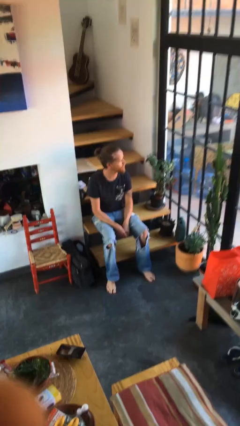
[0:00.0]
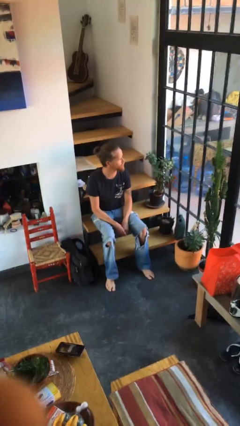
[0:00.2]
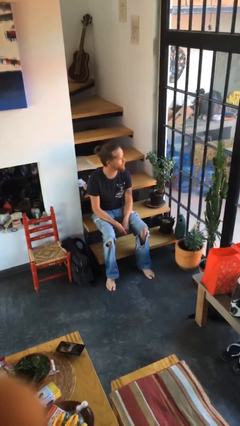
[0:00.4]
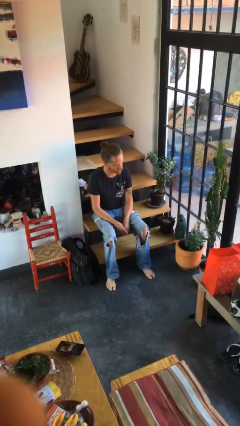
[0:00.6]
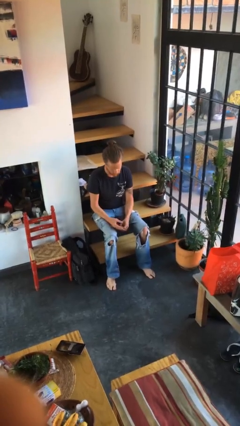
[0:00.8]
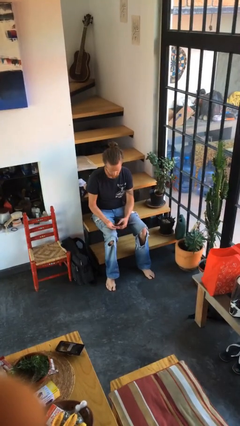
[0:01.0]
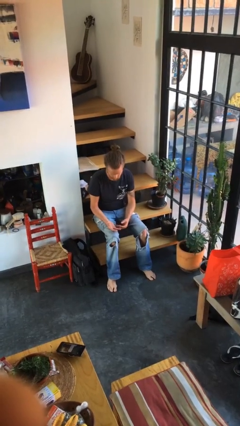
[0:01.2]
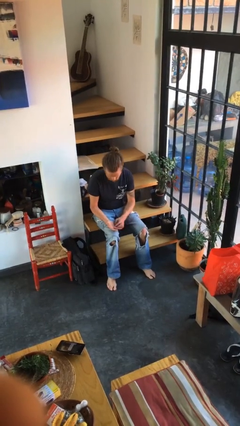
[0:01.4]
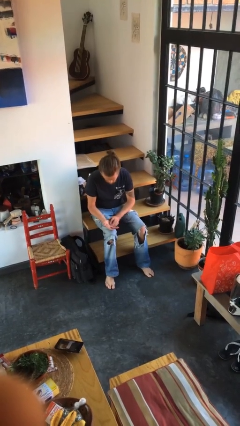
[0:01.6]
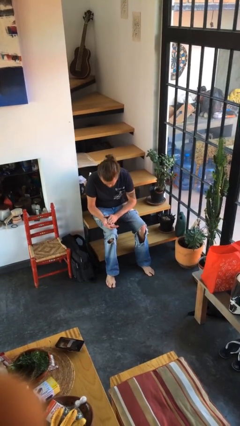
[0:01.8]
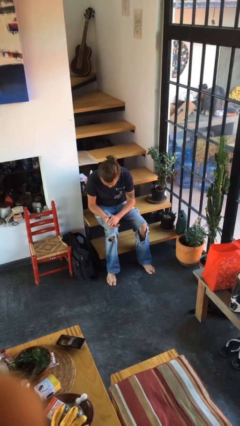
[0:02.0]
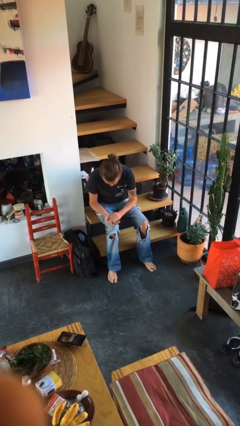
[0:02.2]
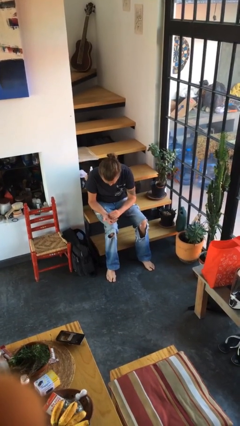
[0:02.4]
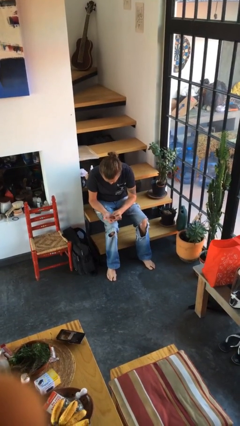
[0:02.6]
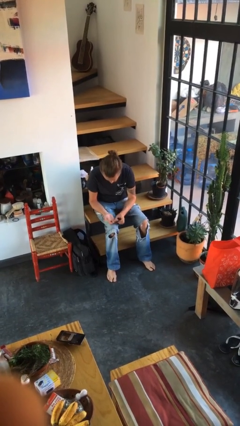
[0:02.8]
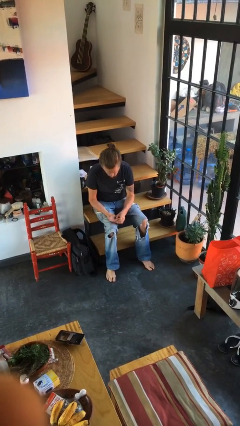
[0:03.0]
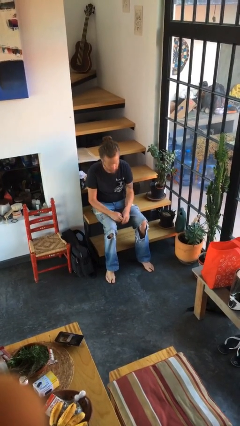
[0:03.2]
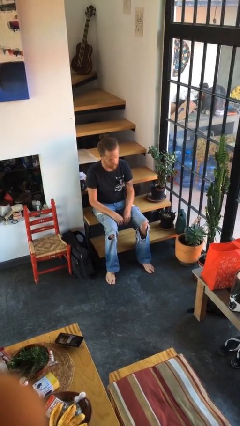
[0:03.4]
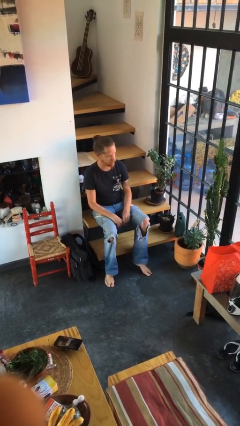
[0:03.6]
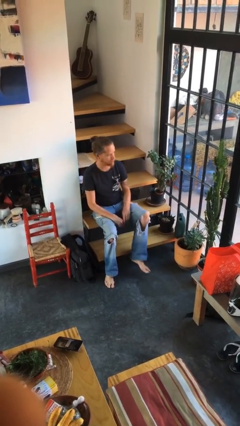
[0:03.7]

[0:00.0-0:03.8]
person looks at hands in lap

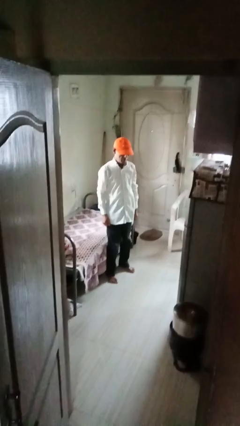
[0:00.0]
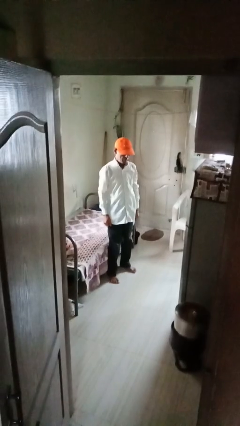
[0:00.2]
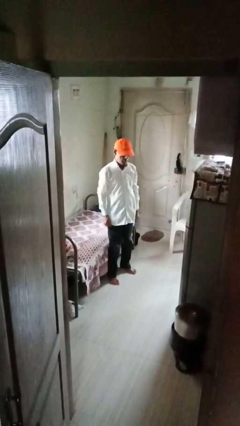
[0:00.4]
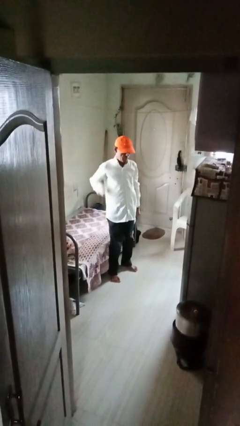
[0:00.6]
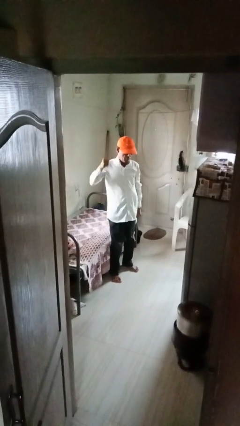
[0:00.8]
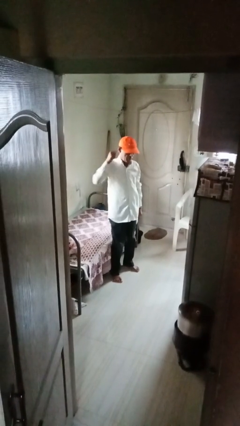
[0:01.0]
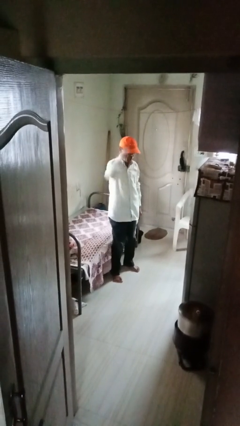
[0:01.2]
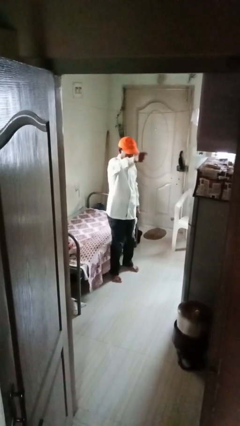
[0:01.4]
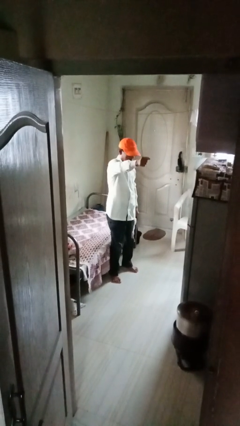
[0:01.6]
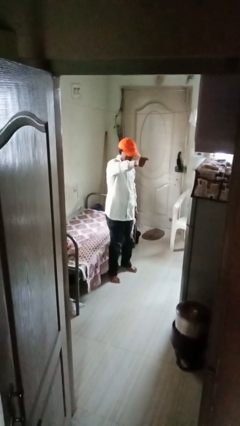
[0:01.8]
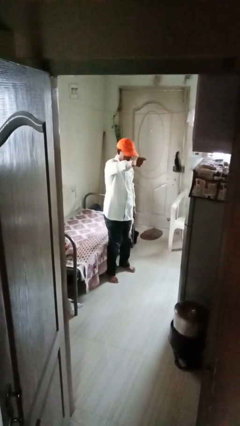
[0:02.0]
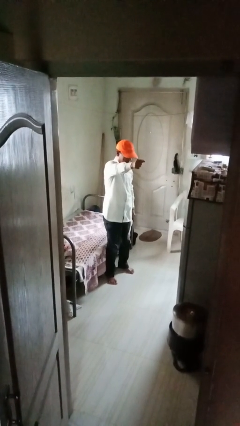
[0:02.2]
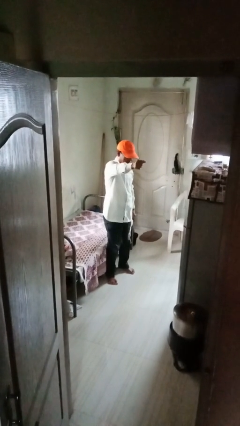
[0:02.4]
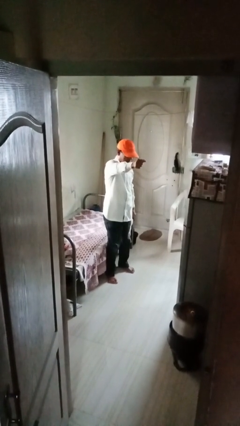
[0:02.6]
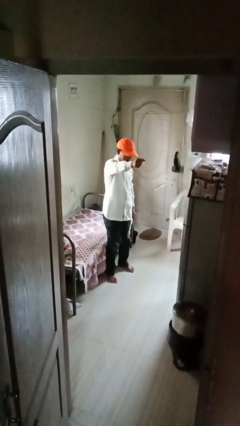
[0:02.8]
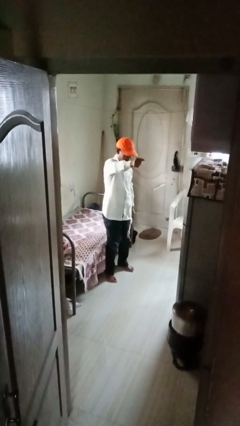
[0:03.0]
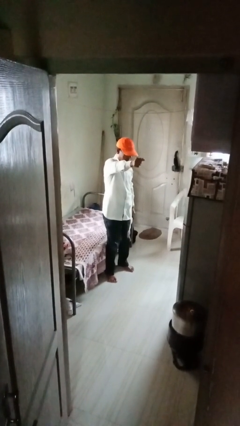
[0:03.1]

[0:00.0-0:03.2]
person punches

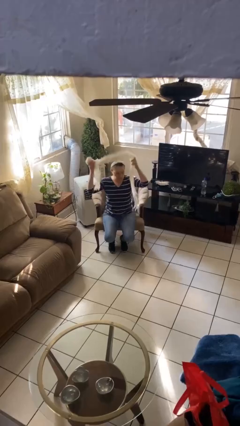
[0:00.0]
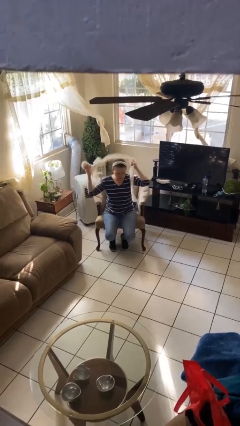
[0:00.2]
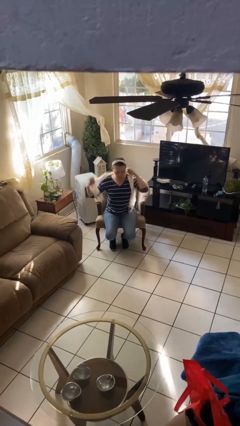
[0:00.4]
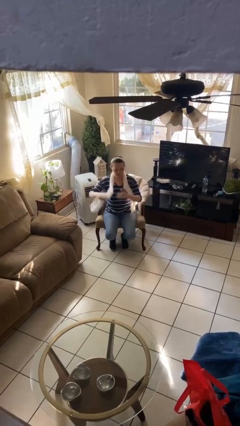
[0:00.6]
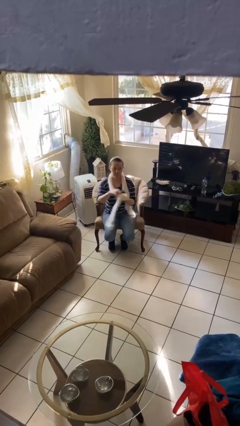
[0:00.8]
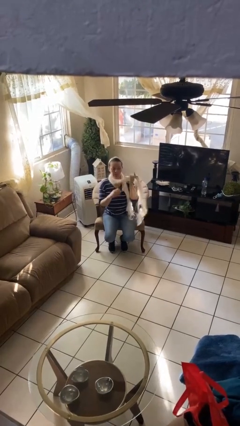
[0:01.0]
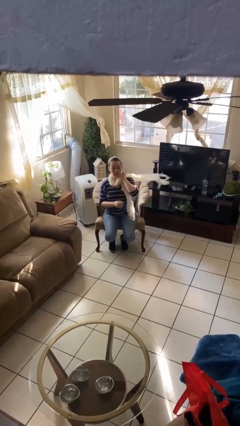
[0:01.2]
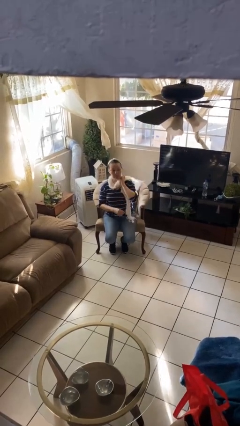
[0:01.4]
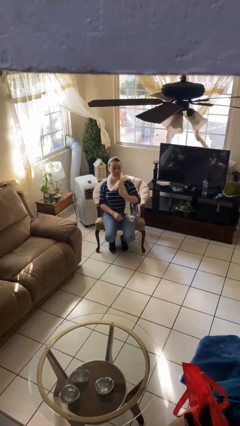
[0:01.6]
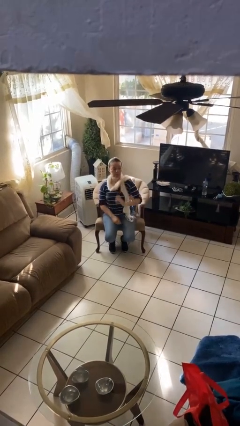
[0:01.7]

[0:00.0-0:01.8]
person puts on scarf

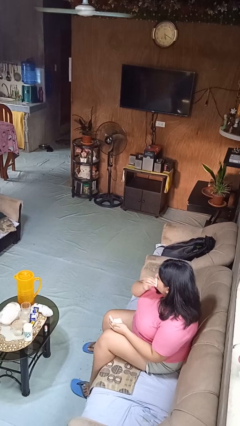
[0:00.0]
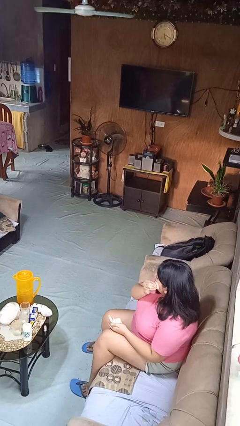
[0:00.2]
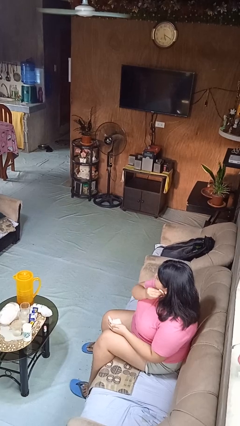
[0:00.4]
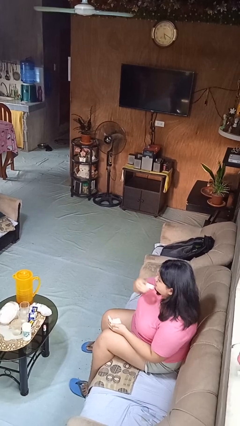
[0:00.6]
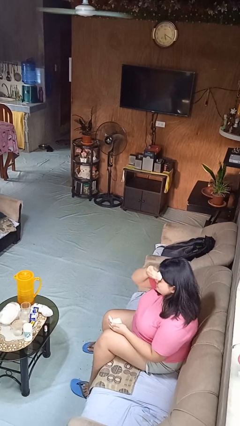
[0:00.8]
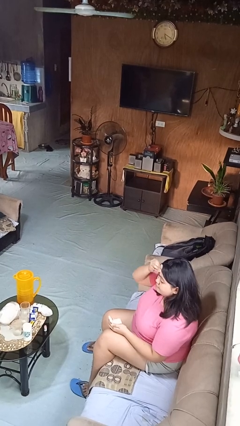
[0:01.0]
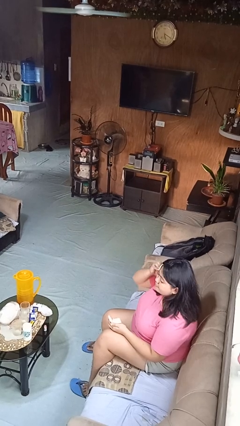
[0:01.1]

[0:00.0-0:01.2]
person applies foundation makeup

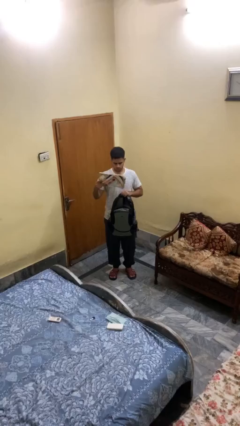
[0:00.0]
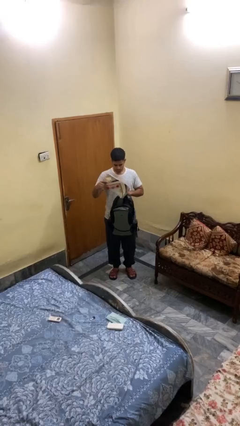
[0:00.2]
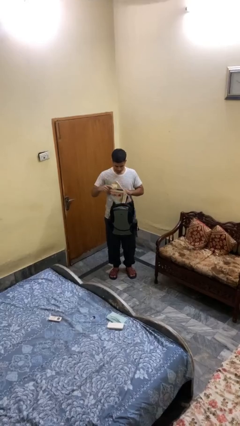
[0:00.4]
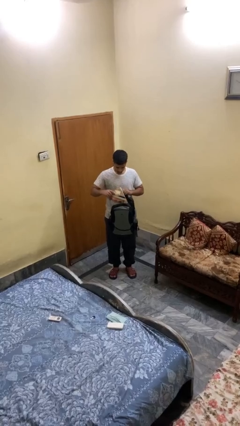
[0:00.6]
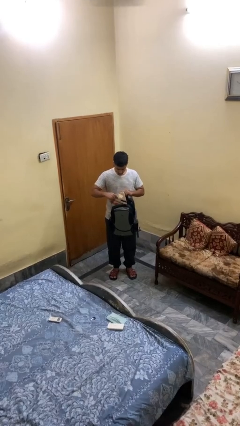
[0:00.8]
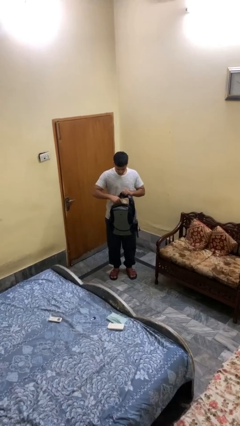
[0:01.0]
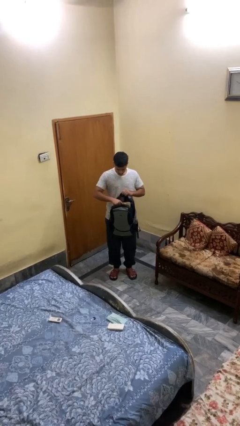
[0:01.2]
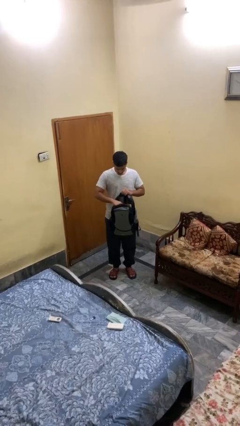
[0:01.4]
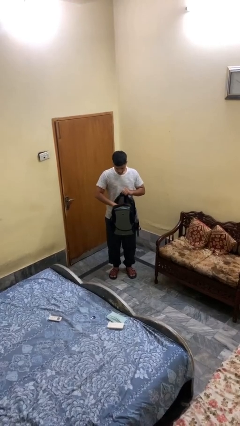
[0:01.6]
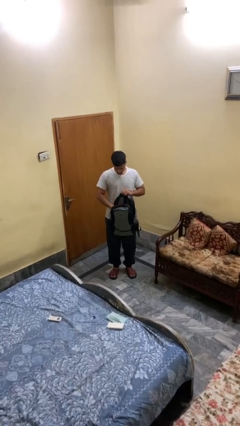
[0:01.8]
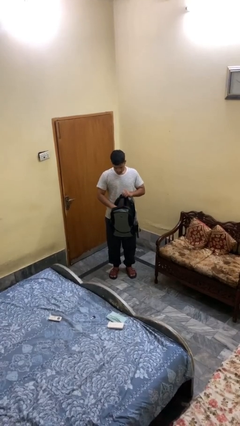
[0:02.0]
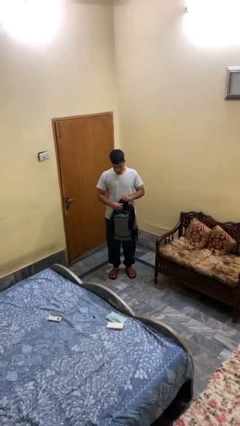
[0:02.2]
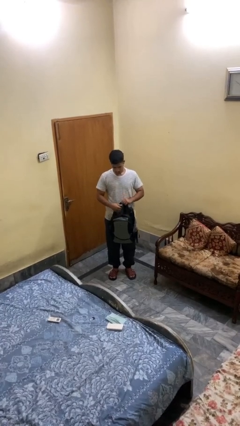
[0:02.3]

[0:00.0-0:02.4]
person puts object into backpack

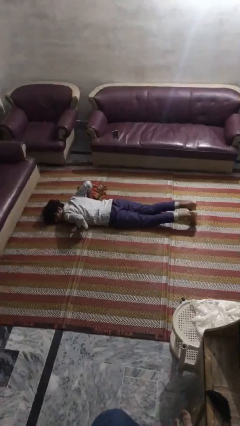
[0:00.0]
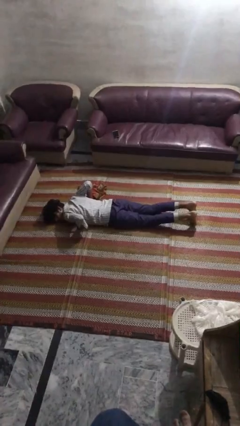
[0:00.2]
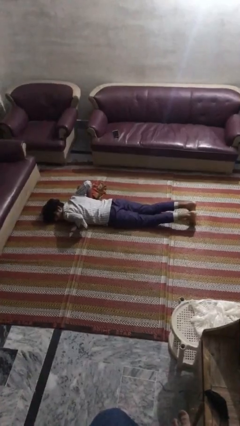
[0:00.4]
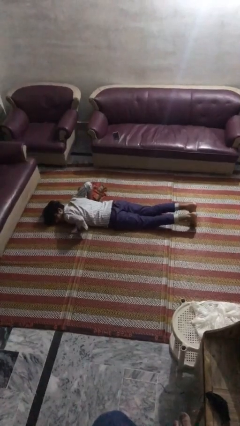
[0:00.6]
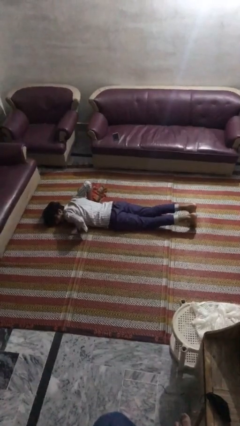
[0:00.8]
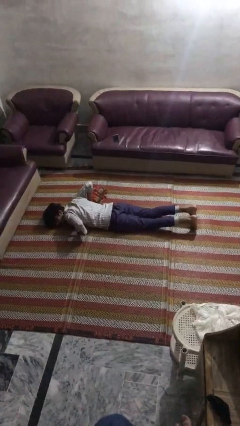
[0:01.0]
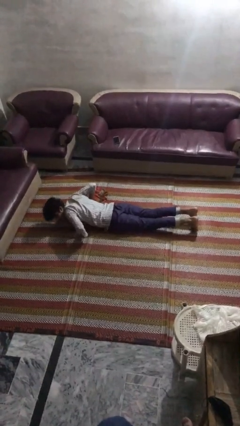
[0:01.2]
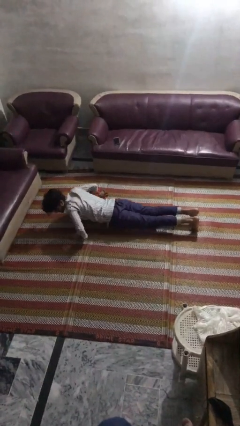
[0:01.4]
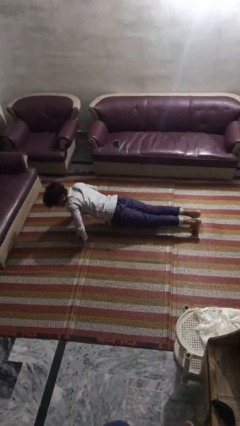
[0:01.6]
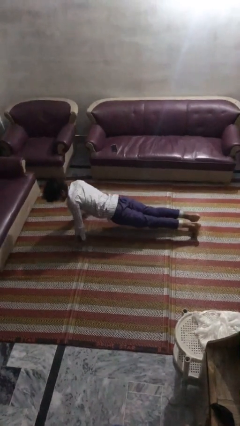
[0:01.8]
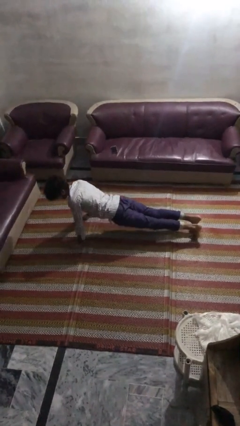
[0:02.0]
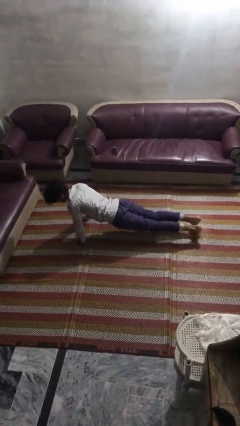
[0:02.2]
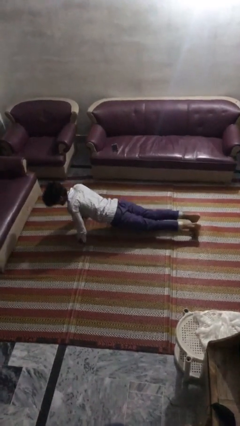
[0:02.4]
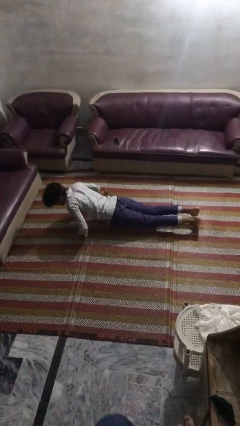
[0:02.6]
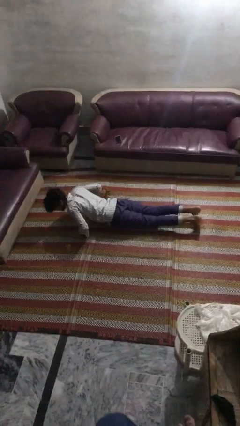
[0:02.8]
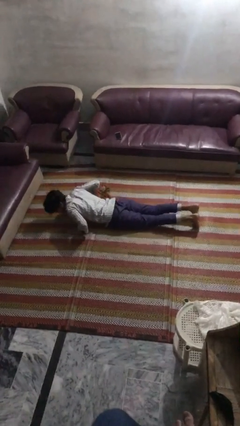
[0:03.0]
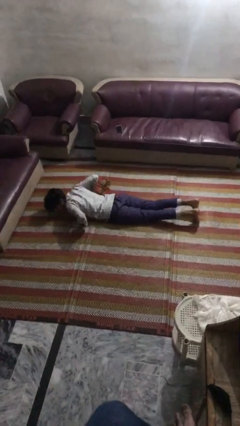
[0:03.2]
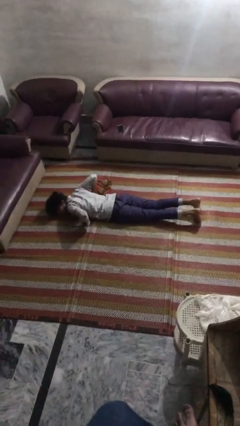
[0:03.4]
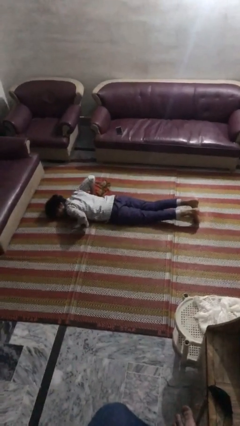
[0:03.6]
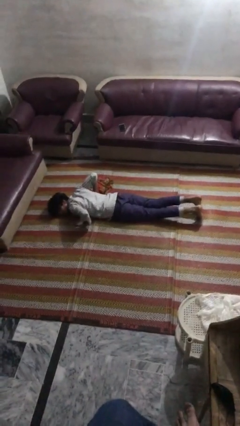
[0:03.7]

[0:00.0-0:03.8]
person exercises with pushup

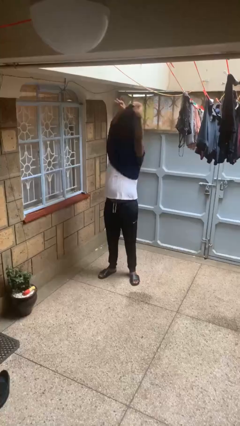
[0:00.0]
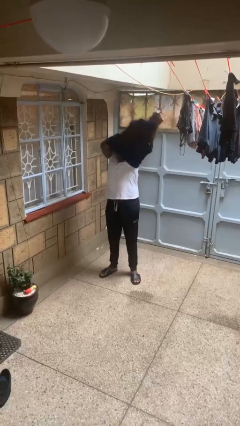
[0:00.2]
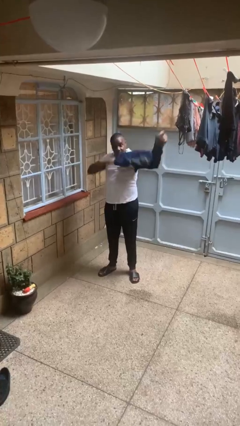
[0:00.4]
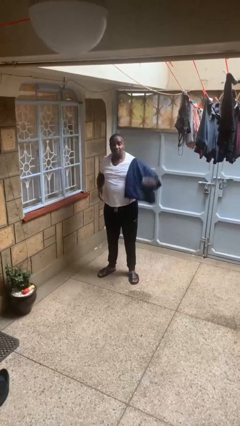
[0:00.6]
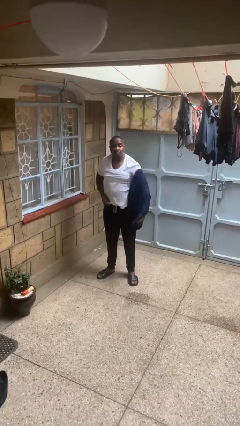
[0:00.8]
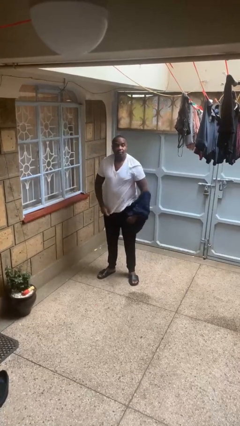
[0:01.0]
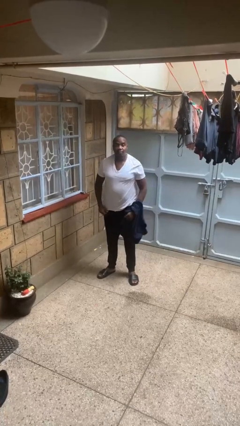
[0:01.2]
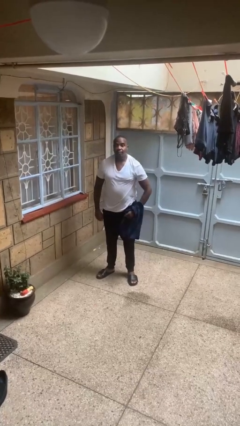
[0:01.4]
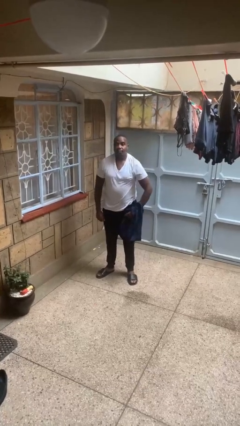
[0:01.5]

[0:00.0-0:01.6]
person takes off shirt
